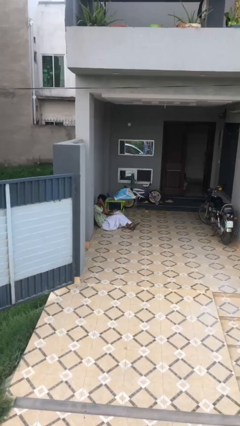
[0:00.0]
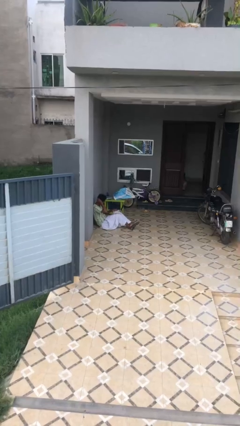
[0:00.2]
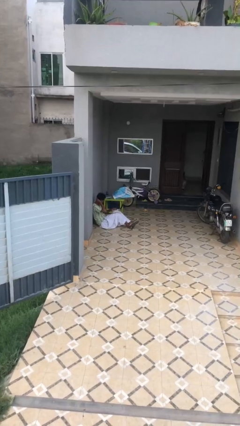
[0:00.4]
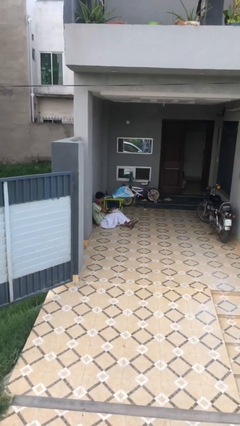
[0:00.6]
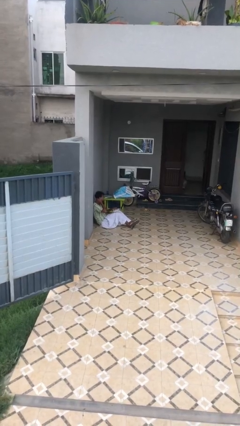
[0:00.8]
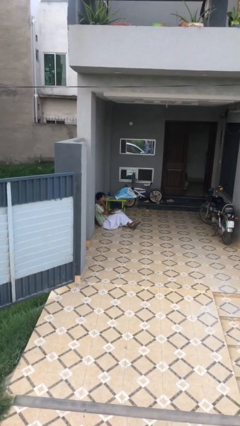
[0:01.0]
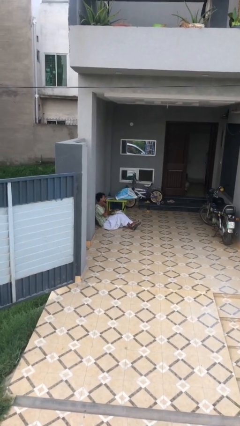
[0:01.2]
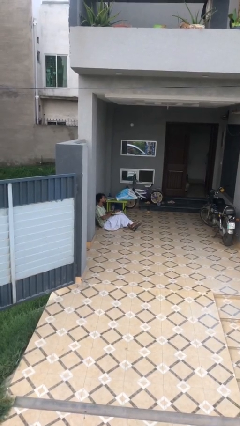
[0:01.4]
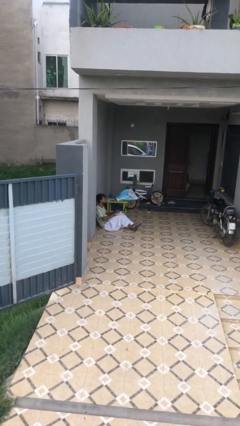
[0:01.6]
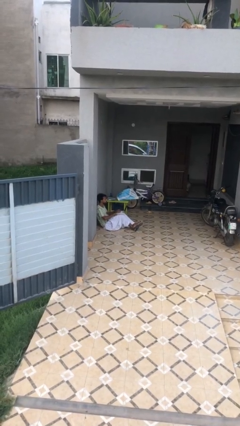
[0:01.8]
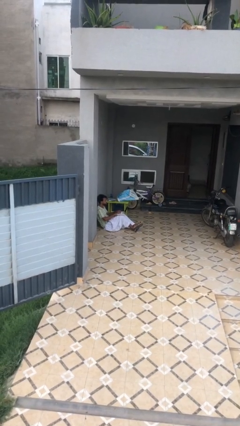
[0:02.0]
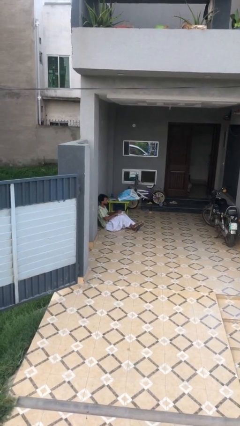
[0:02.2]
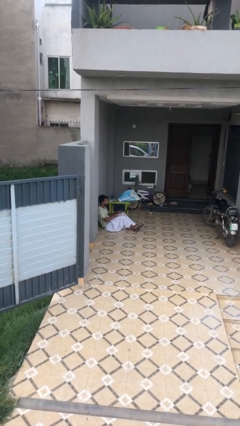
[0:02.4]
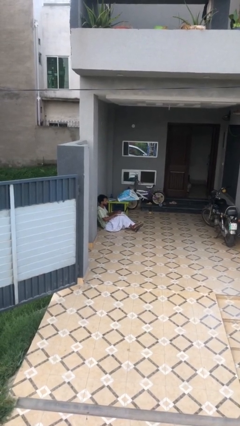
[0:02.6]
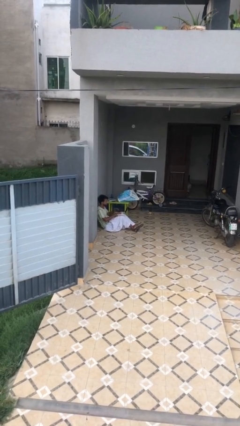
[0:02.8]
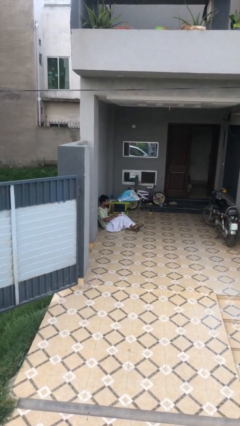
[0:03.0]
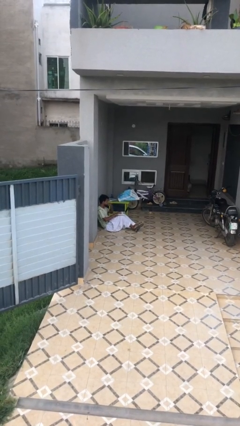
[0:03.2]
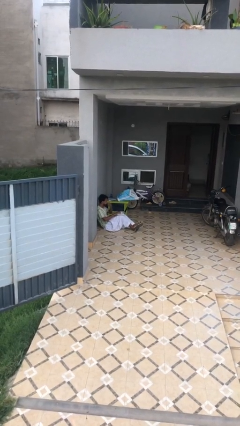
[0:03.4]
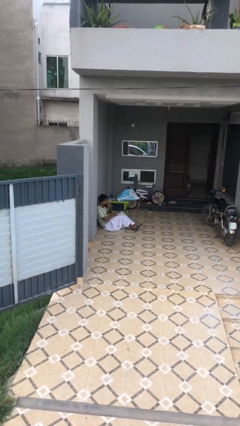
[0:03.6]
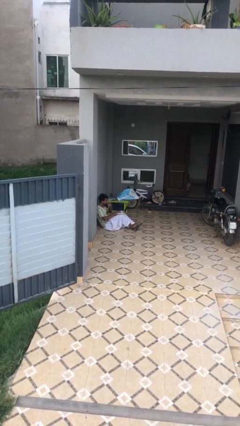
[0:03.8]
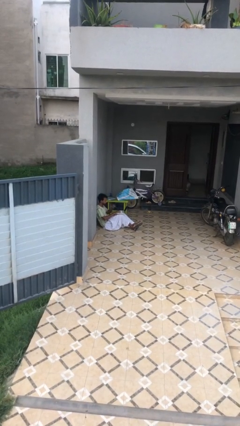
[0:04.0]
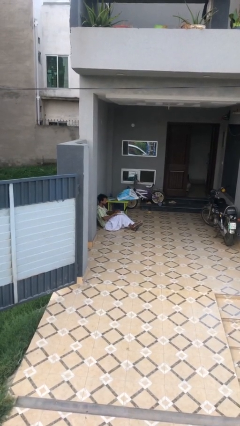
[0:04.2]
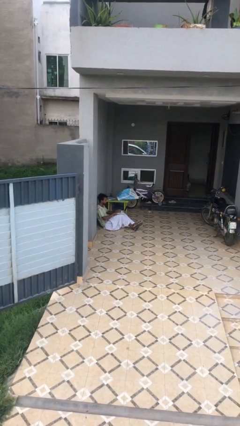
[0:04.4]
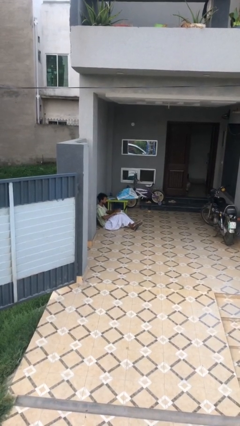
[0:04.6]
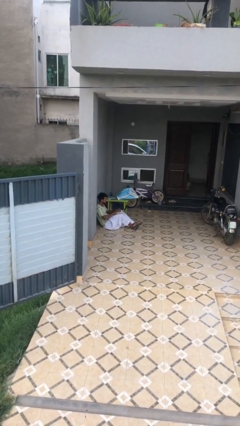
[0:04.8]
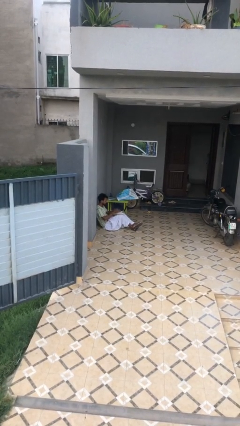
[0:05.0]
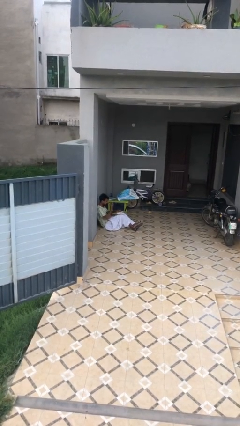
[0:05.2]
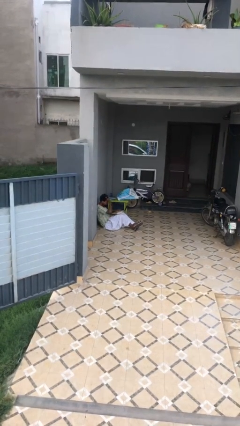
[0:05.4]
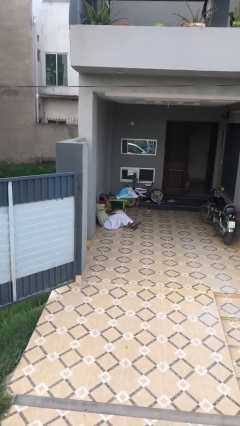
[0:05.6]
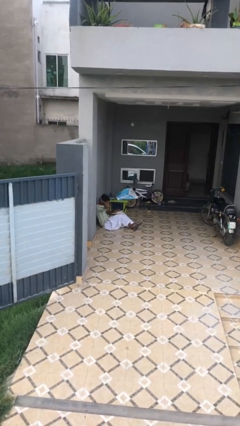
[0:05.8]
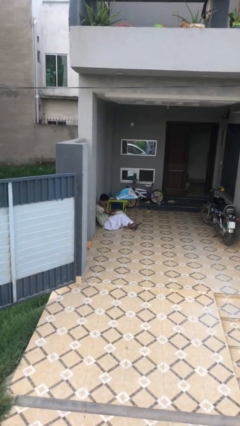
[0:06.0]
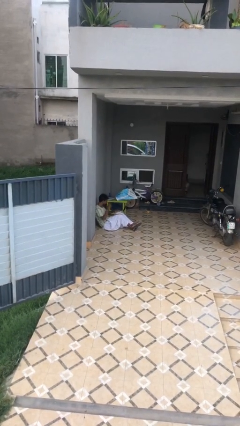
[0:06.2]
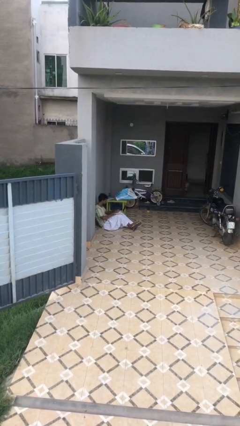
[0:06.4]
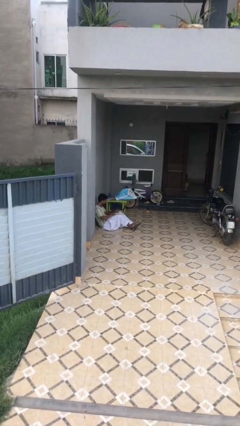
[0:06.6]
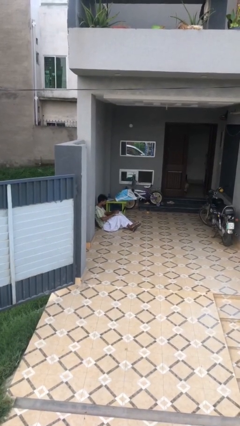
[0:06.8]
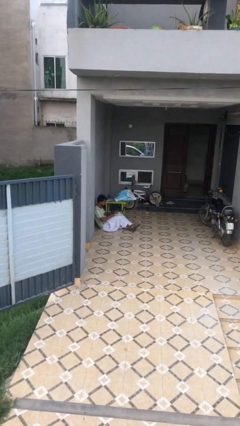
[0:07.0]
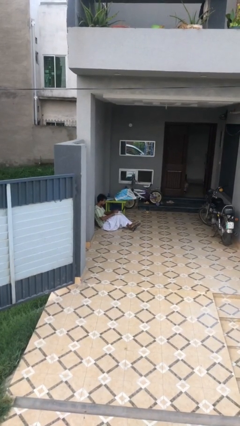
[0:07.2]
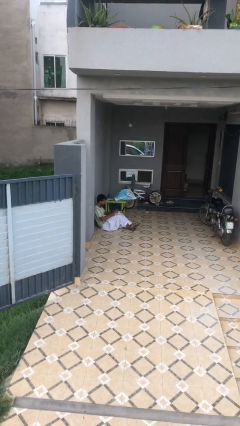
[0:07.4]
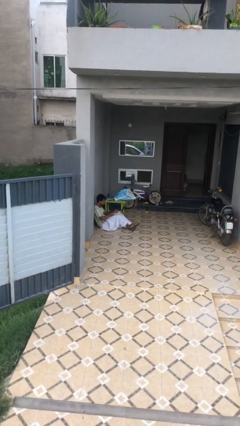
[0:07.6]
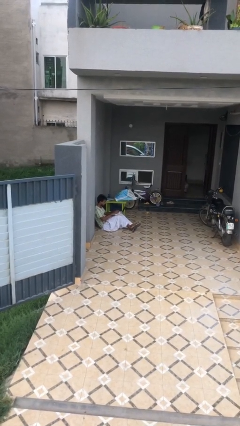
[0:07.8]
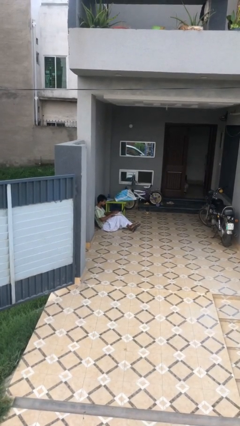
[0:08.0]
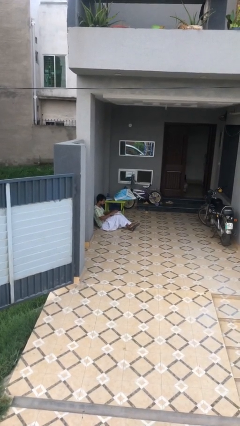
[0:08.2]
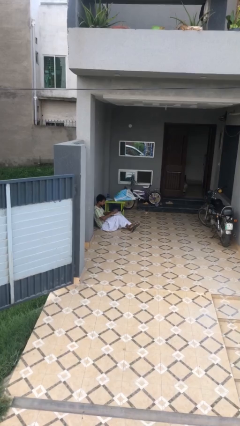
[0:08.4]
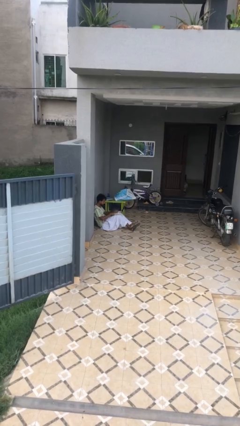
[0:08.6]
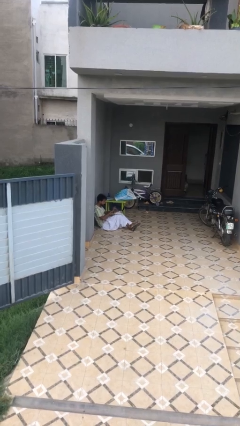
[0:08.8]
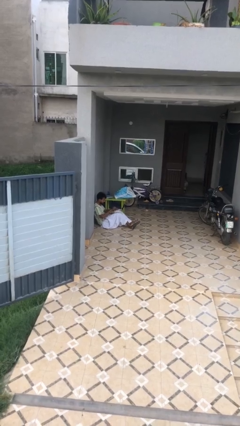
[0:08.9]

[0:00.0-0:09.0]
person interacts with laptop

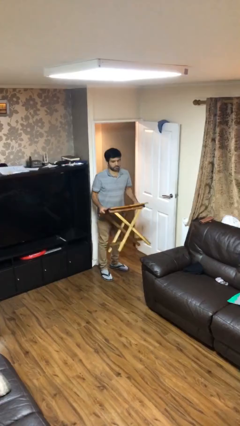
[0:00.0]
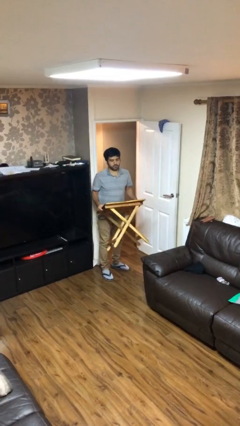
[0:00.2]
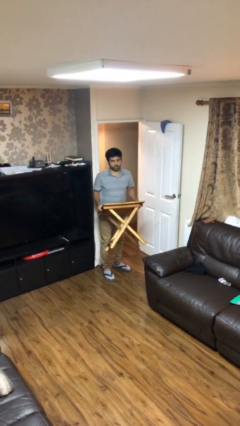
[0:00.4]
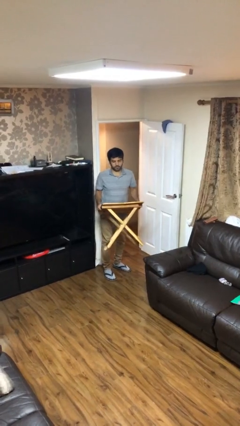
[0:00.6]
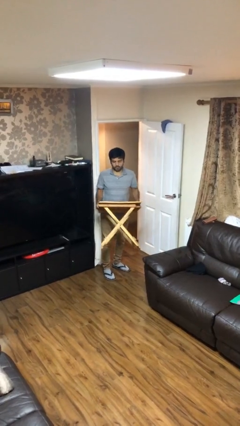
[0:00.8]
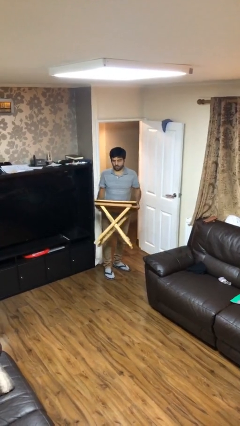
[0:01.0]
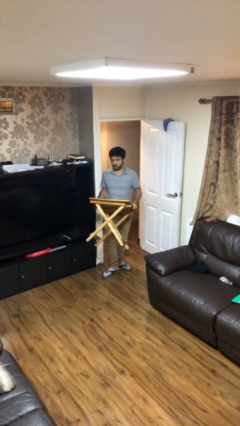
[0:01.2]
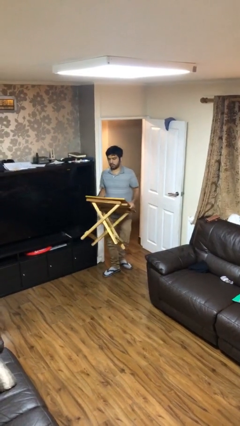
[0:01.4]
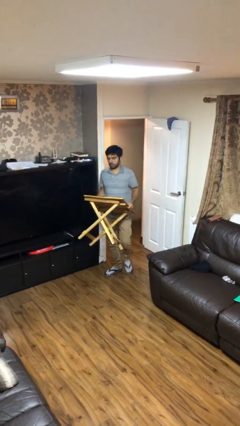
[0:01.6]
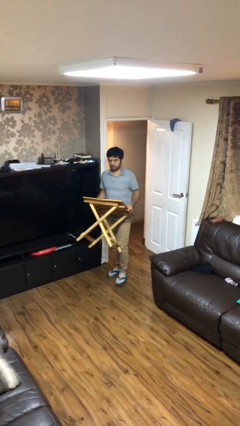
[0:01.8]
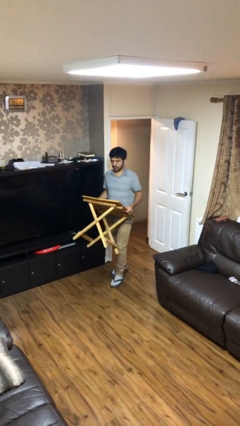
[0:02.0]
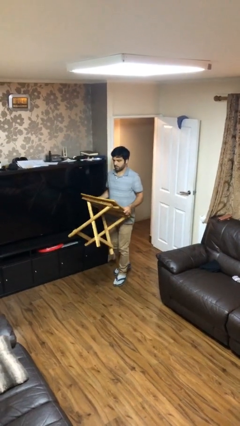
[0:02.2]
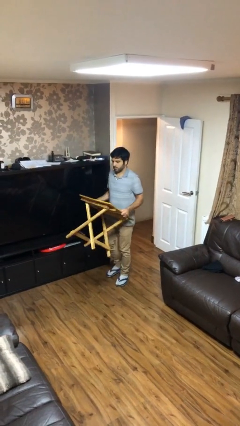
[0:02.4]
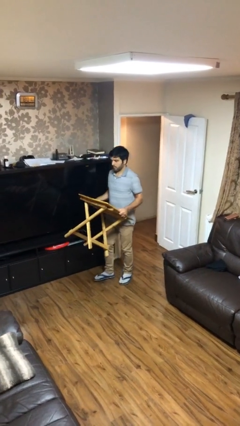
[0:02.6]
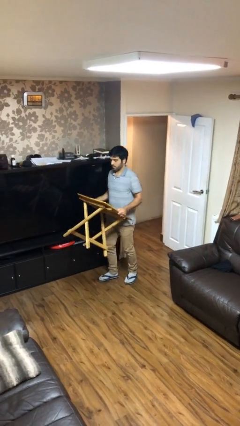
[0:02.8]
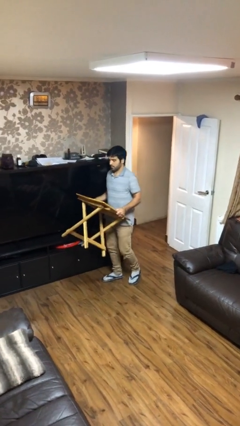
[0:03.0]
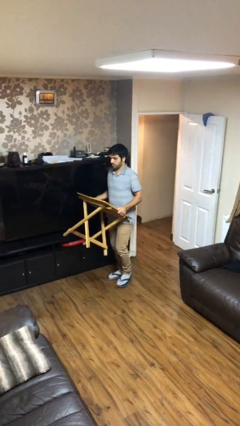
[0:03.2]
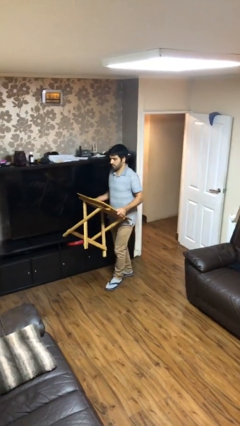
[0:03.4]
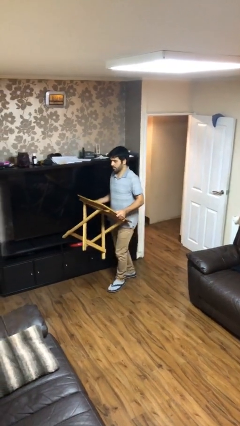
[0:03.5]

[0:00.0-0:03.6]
person carries heavy object

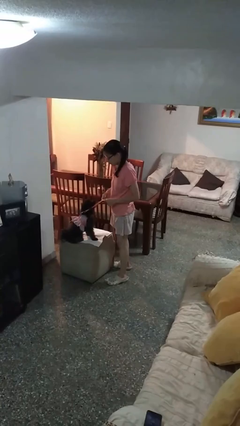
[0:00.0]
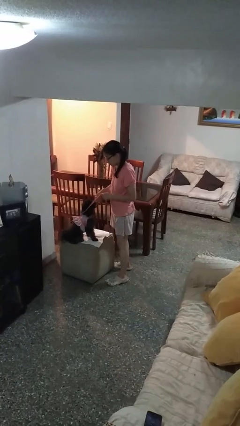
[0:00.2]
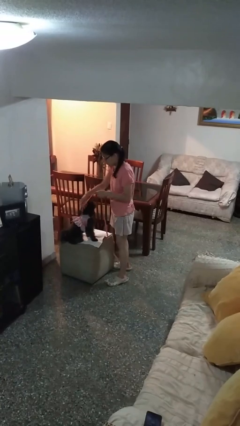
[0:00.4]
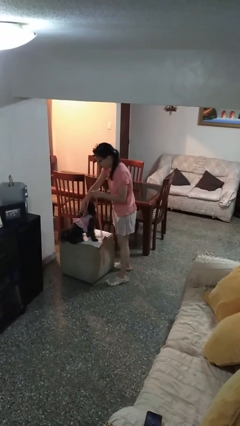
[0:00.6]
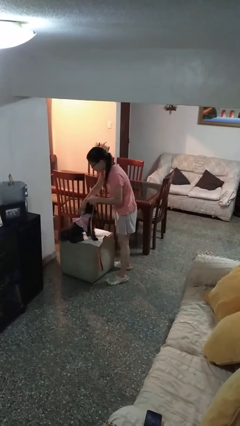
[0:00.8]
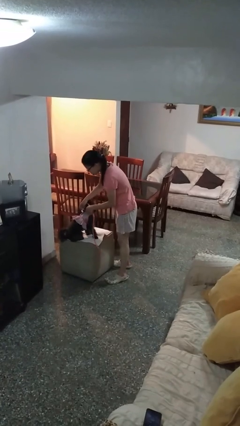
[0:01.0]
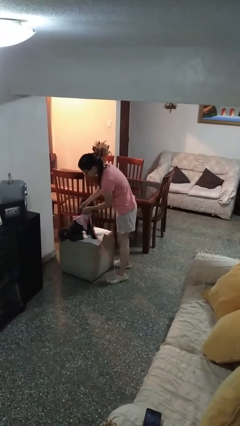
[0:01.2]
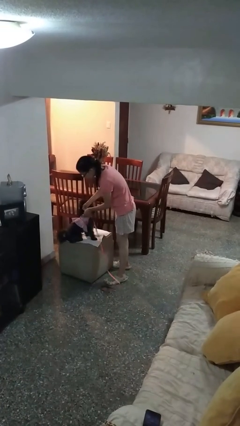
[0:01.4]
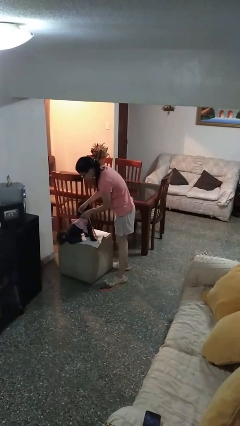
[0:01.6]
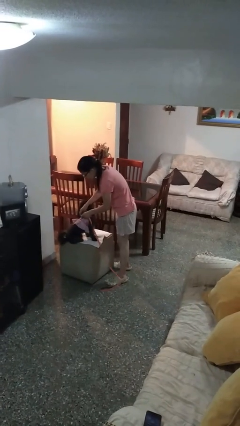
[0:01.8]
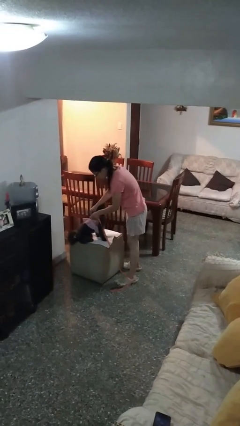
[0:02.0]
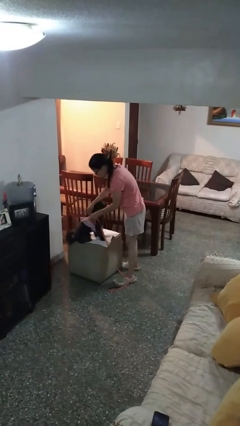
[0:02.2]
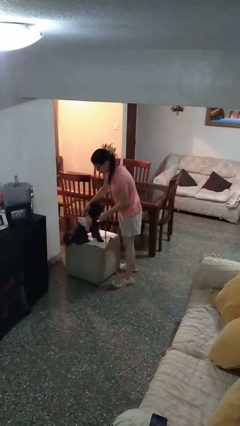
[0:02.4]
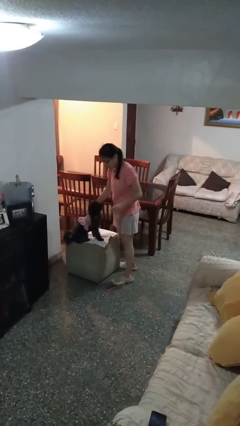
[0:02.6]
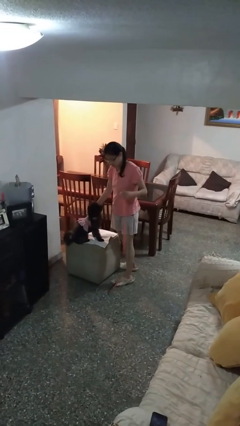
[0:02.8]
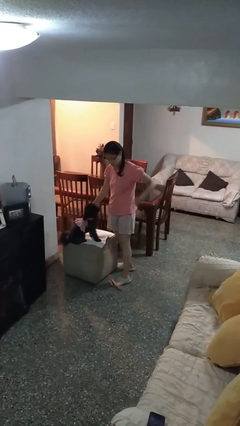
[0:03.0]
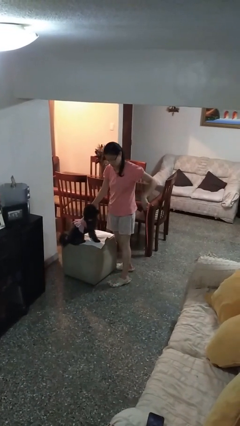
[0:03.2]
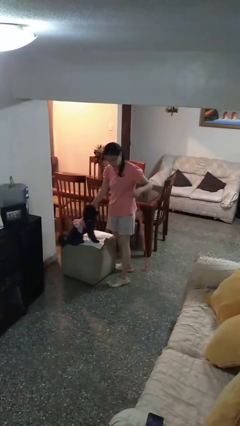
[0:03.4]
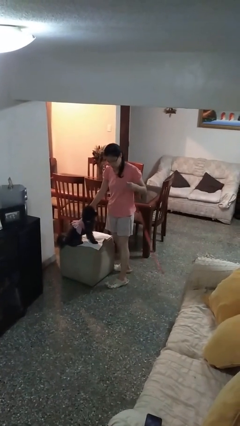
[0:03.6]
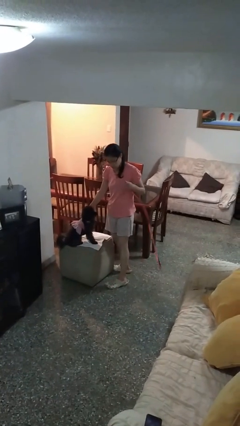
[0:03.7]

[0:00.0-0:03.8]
person unattaches leash from dog

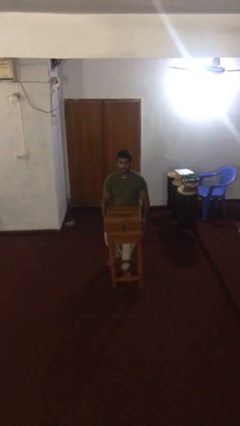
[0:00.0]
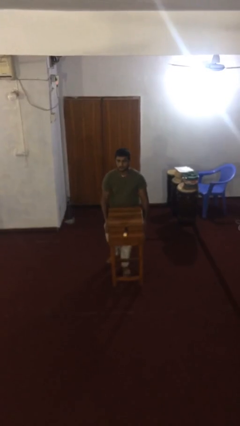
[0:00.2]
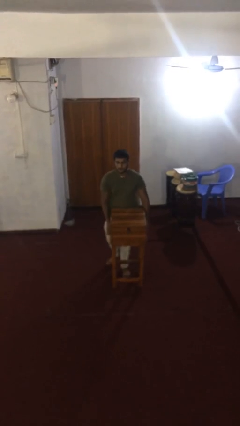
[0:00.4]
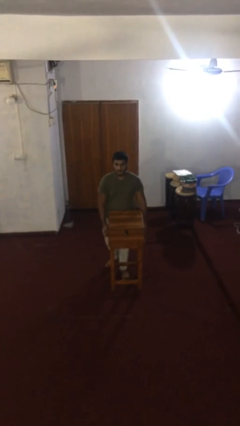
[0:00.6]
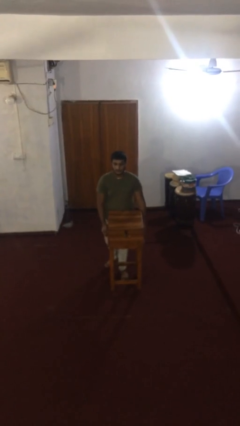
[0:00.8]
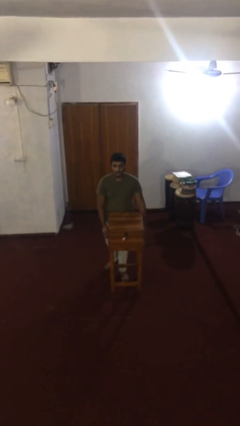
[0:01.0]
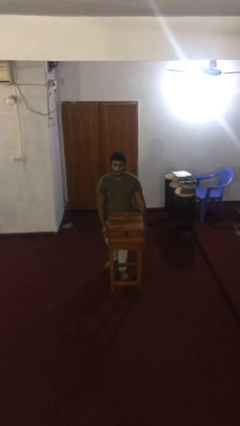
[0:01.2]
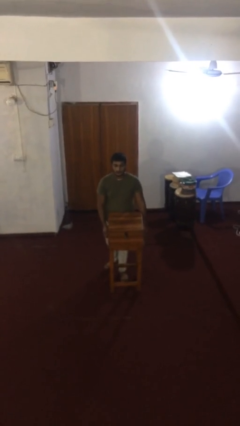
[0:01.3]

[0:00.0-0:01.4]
person puts down object on floor

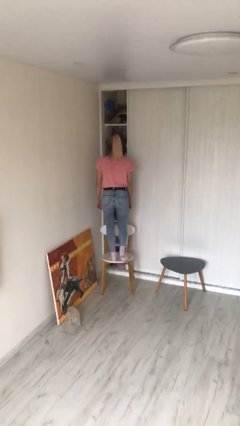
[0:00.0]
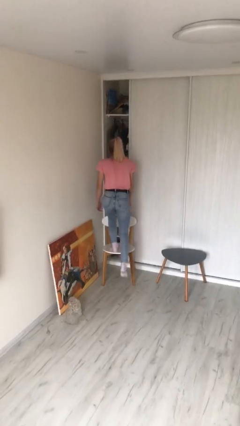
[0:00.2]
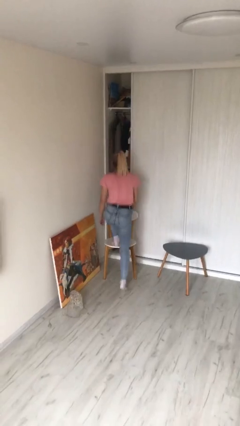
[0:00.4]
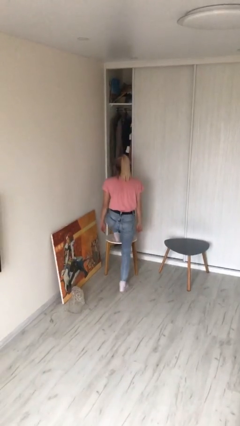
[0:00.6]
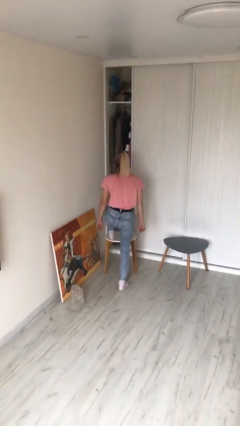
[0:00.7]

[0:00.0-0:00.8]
person climbs off chair
